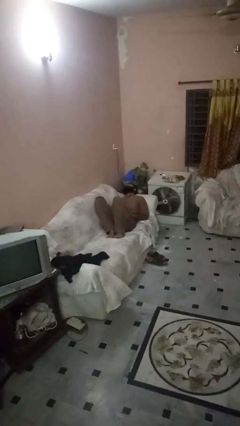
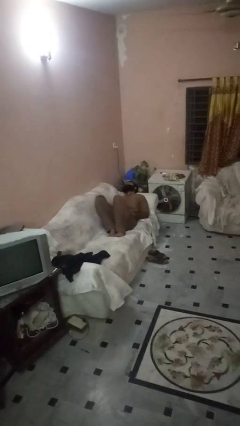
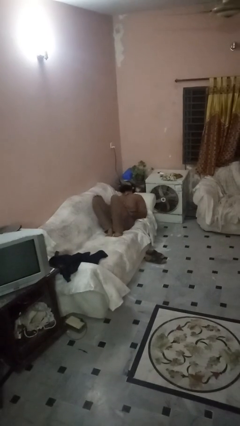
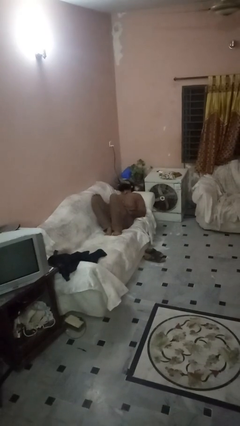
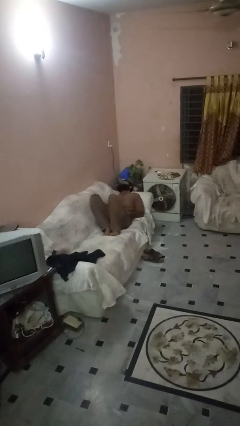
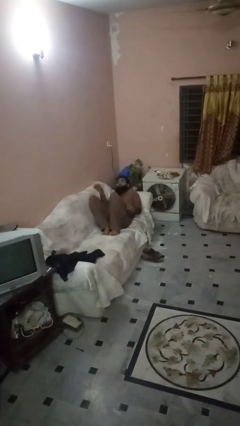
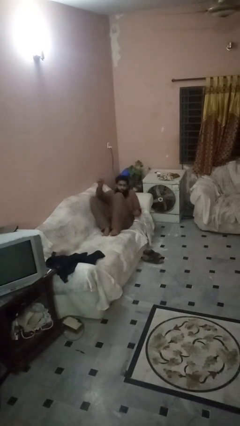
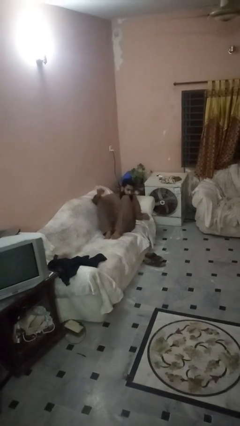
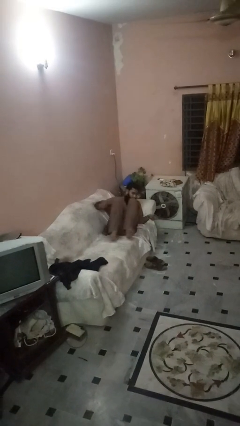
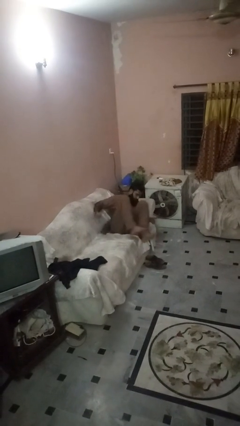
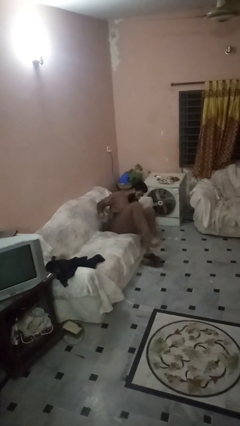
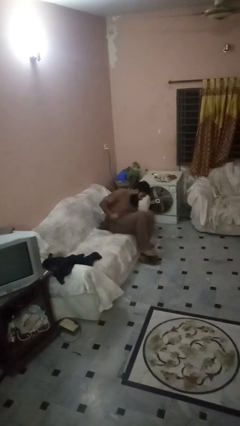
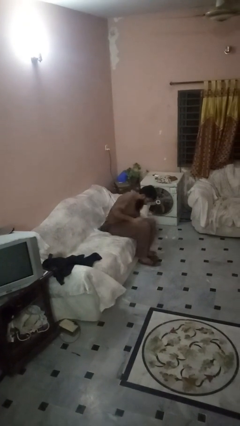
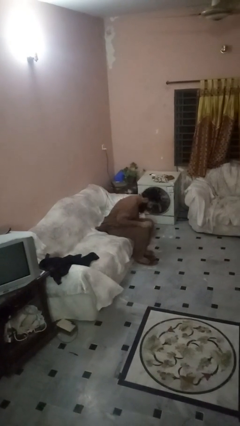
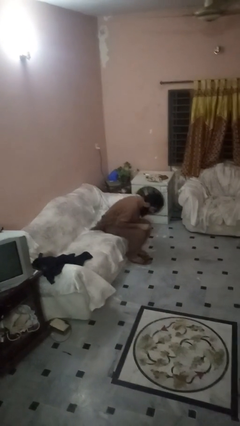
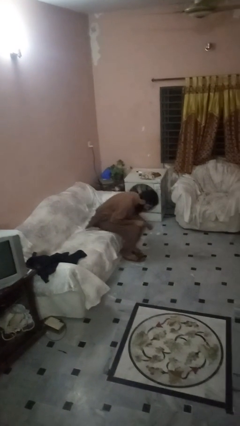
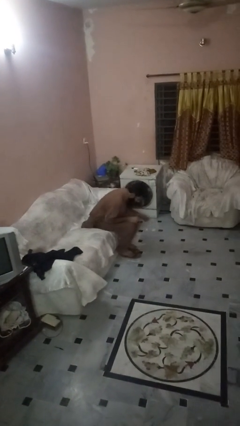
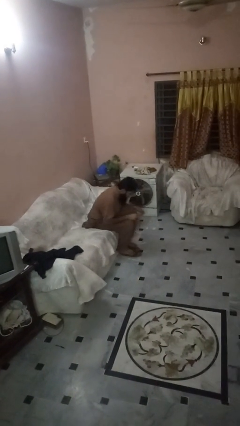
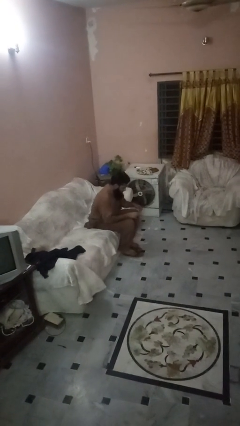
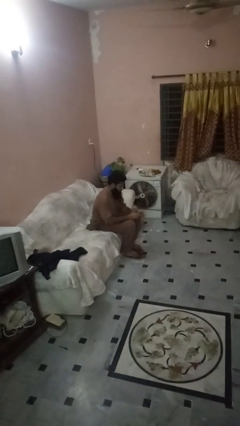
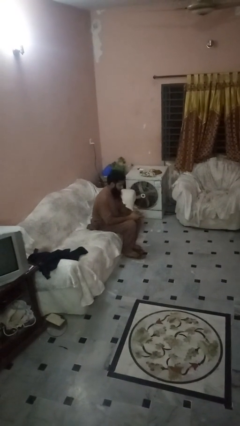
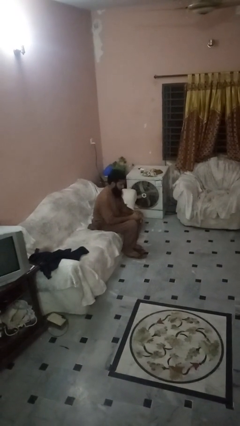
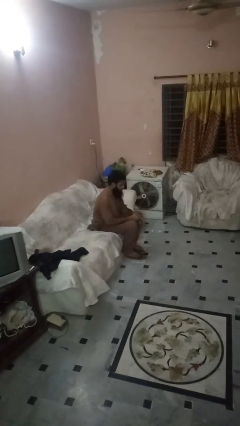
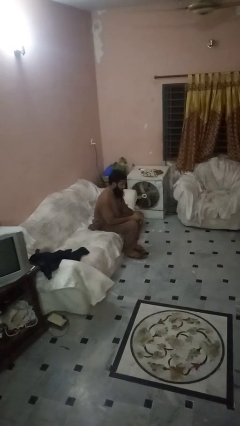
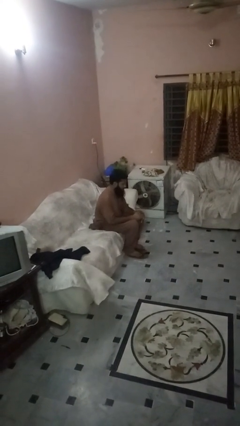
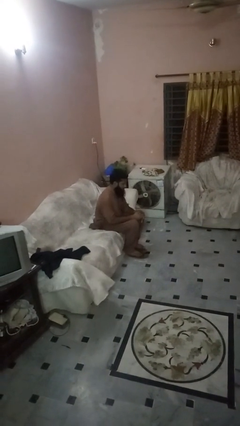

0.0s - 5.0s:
person stands up

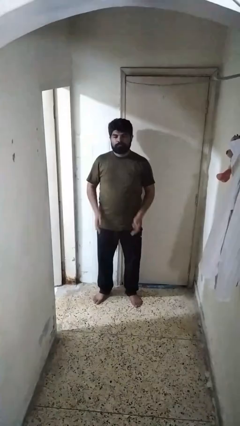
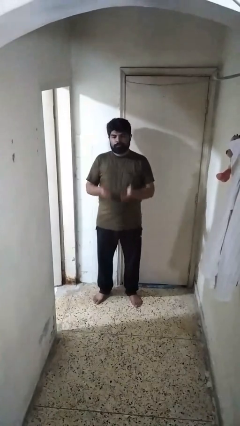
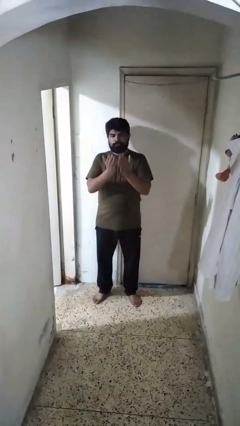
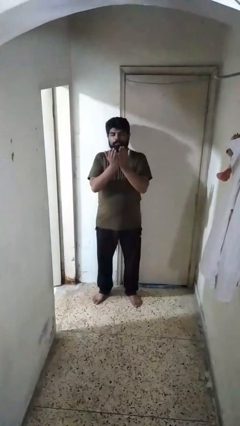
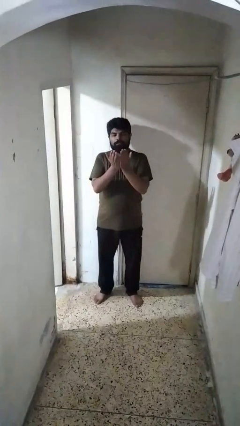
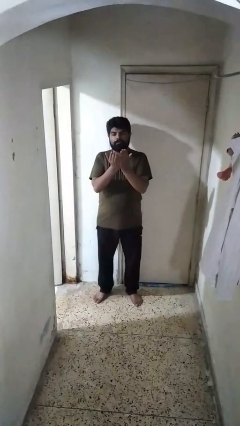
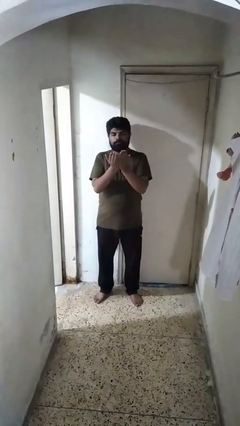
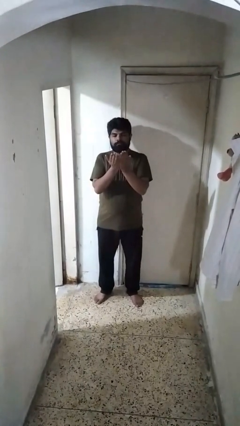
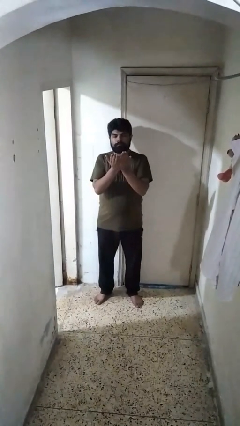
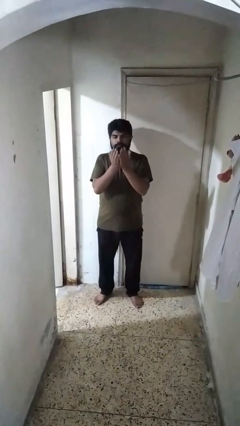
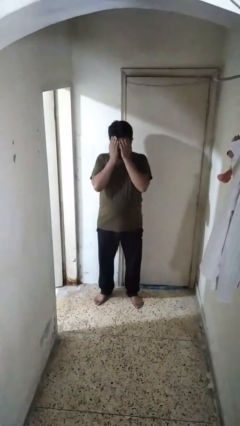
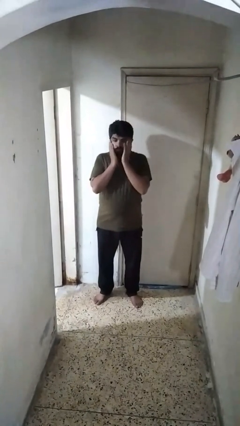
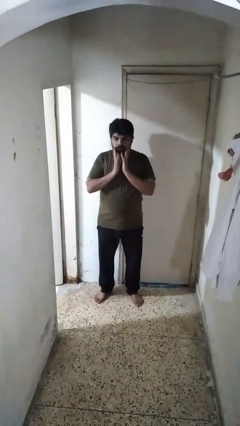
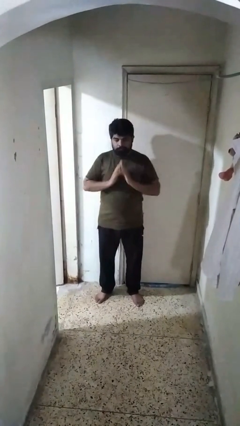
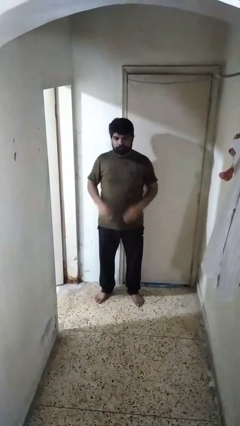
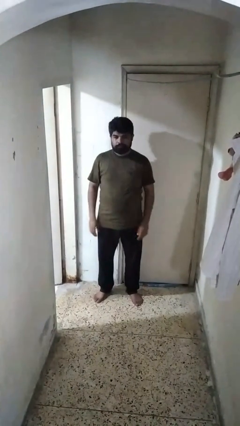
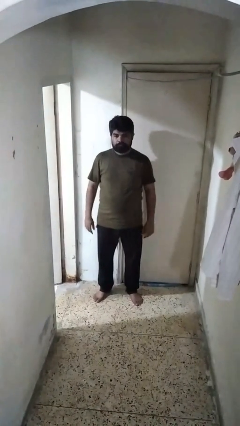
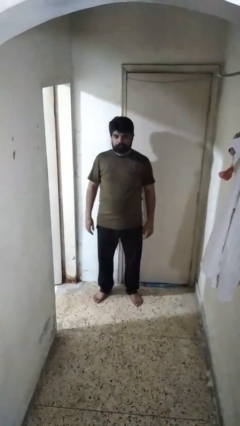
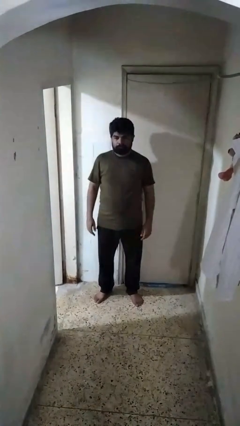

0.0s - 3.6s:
person prays

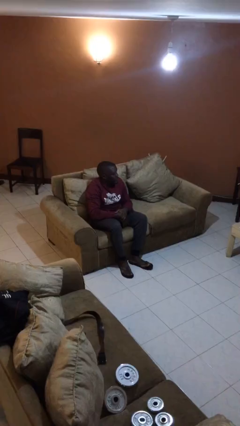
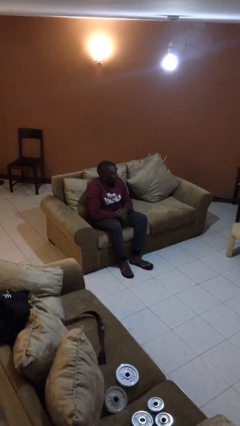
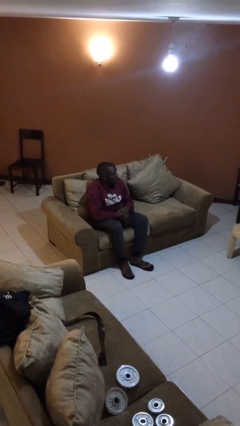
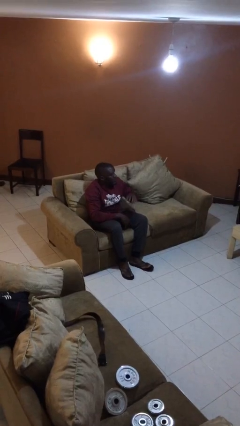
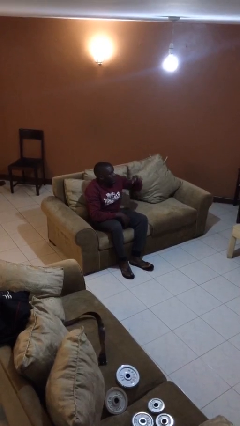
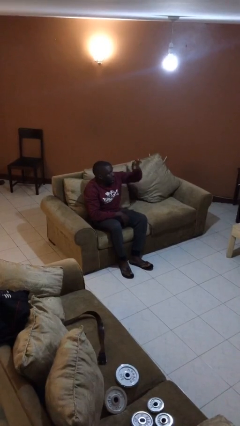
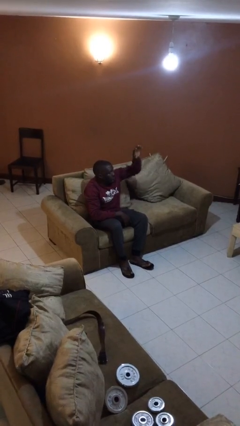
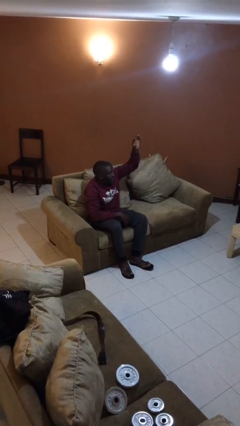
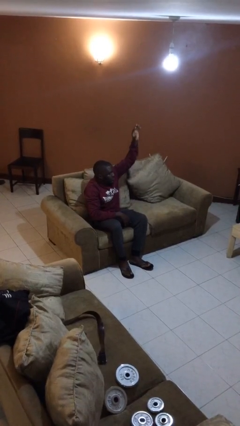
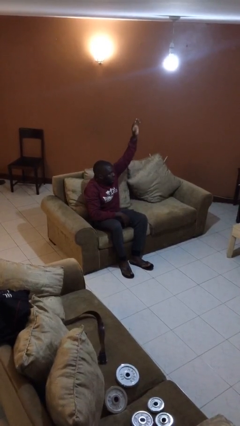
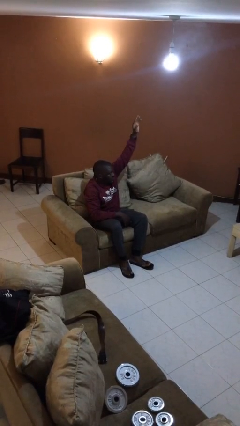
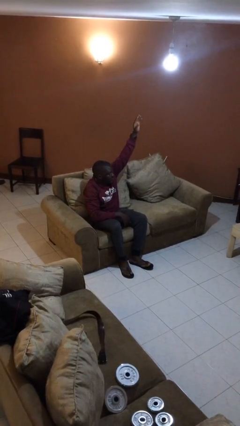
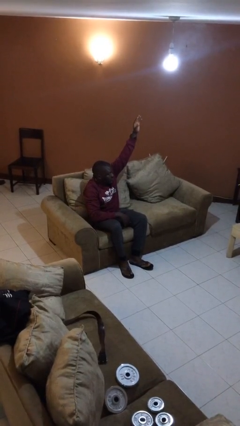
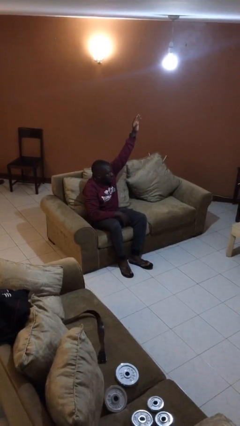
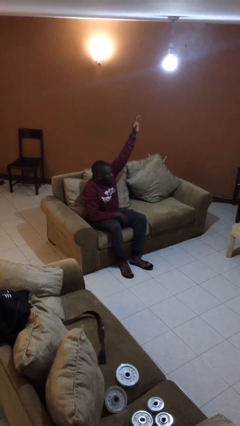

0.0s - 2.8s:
person gestures raise hand

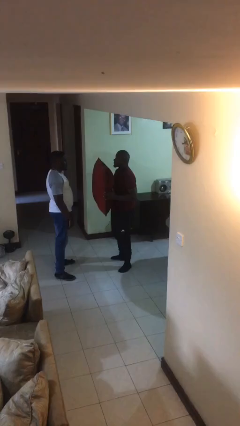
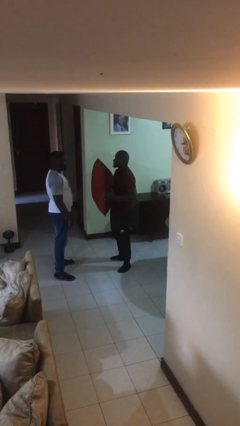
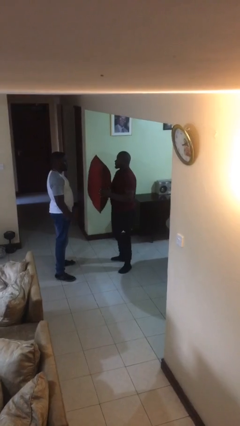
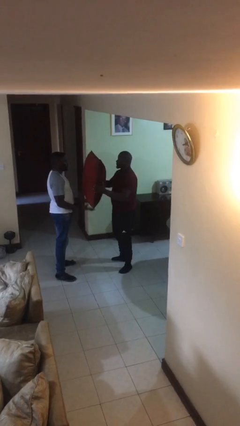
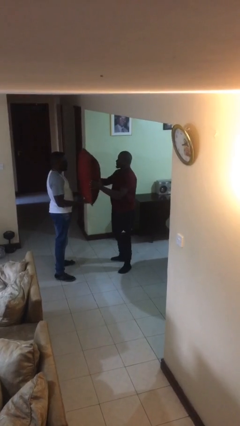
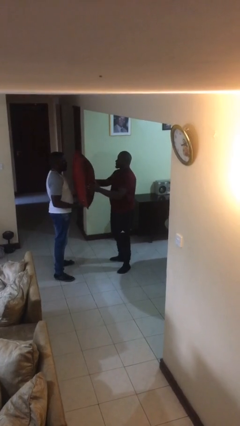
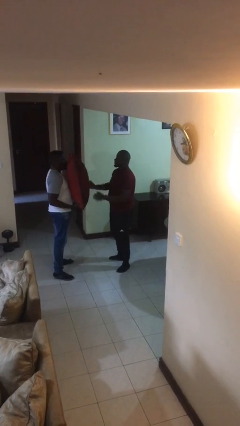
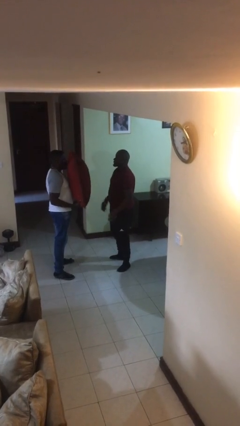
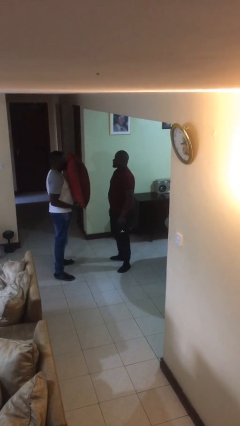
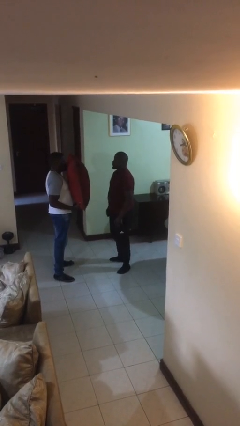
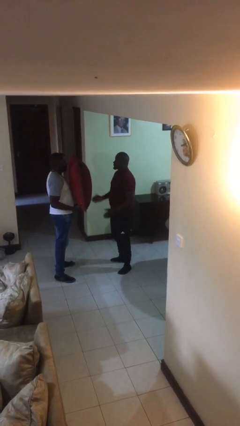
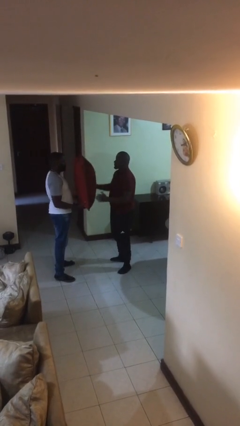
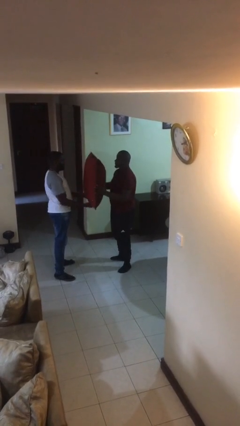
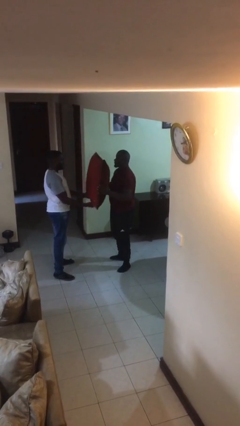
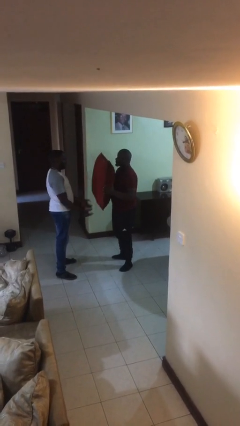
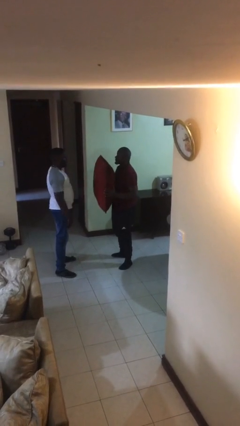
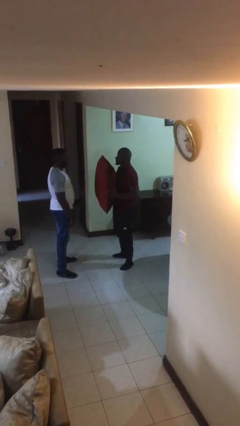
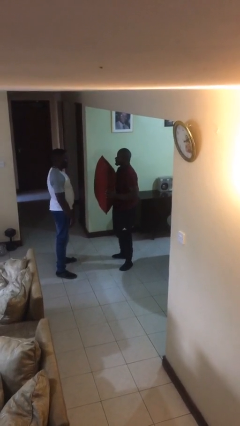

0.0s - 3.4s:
person transfers object to person

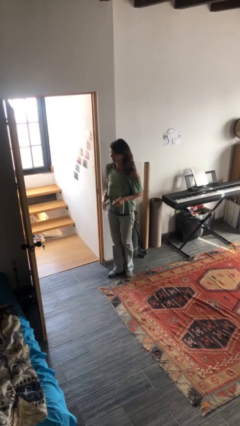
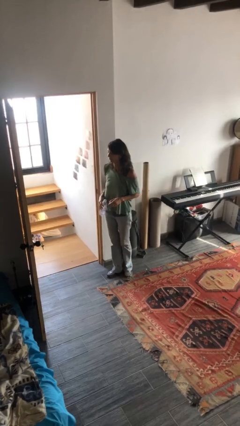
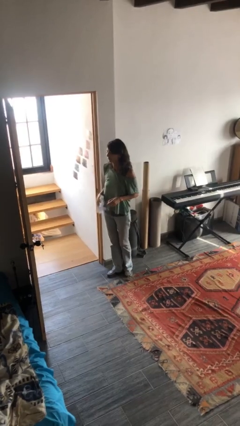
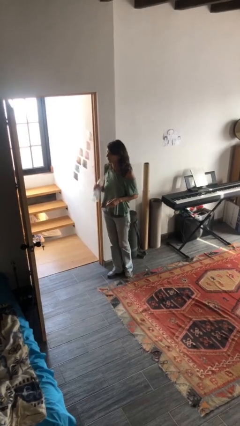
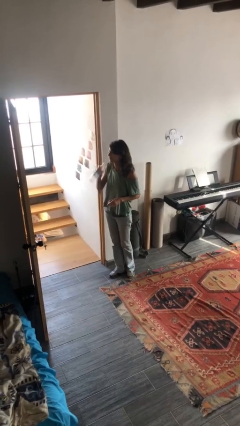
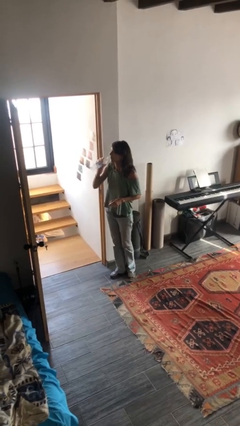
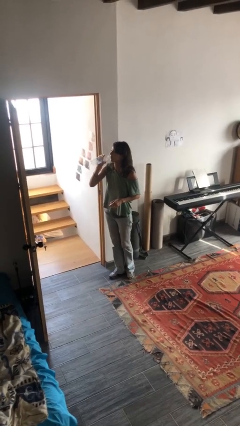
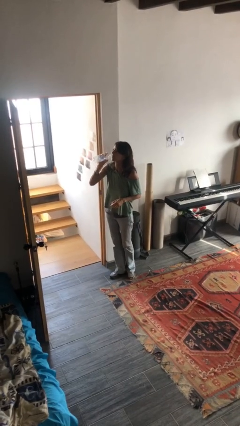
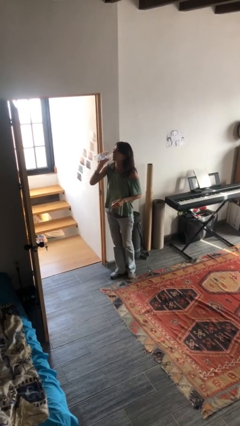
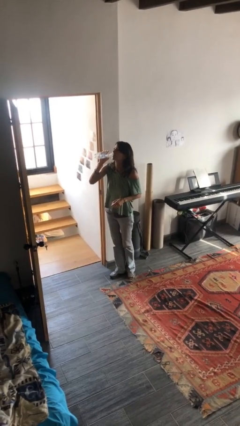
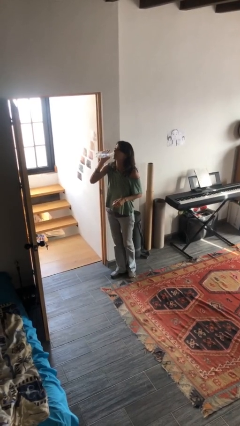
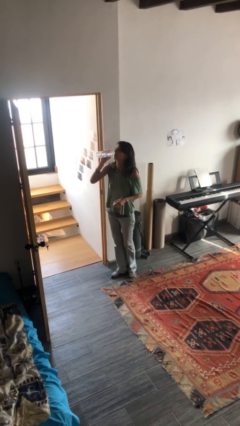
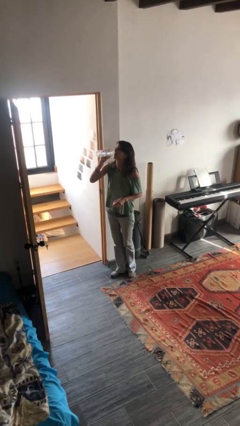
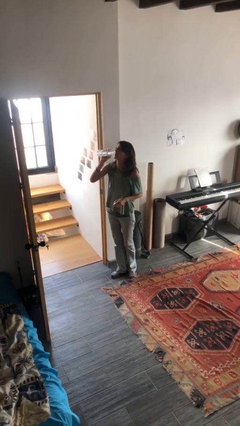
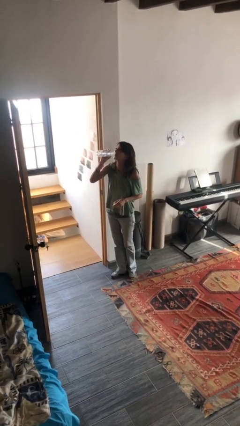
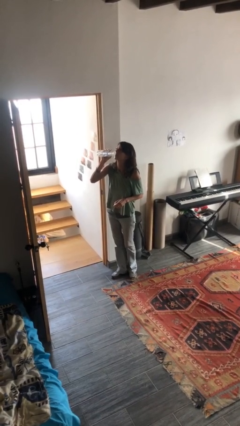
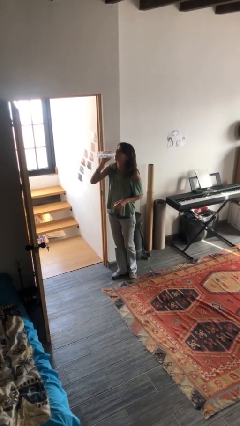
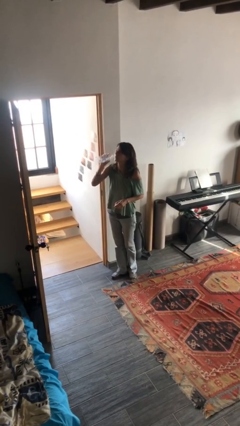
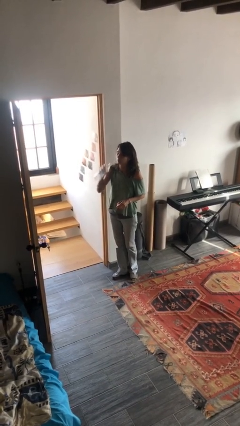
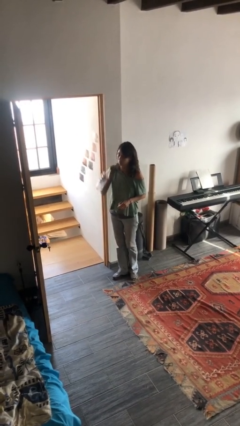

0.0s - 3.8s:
person drinks from bottle
